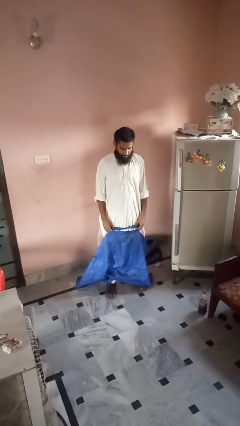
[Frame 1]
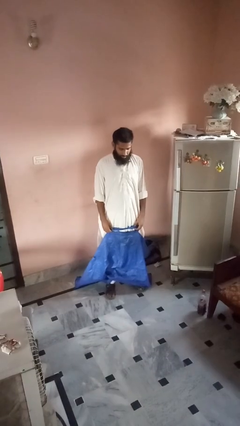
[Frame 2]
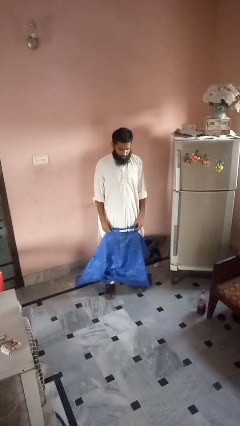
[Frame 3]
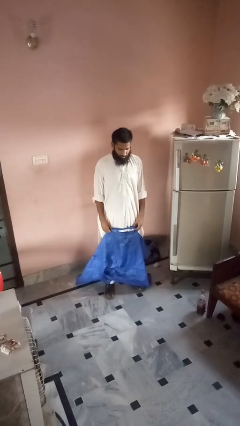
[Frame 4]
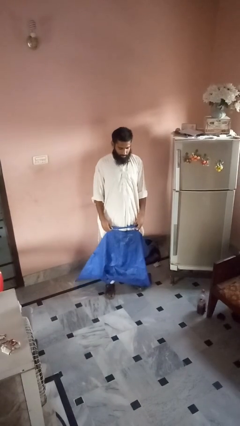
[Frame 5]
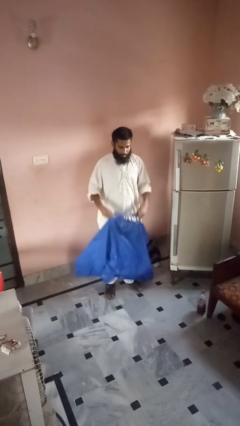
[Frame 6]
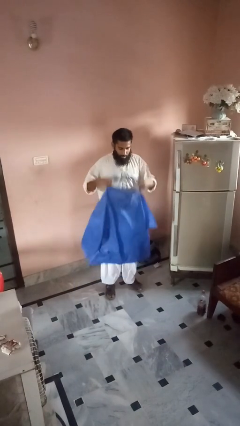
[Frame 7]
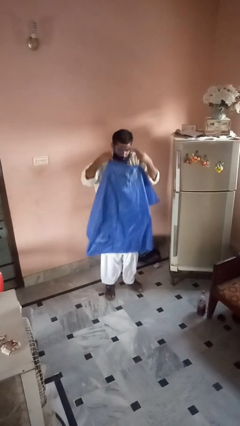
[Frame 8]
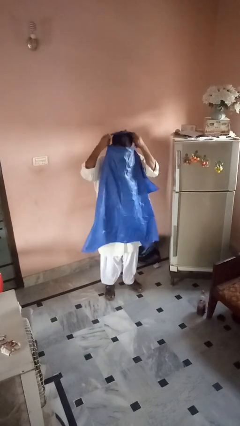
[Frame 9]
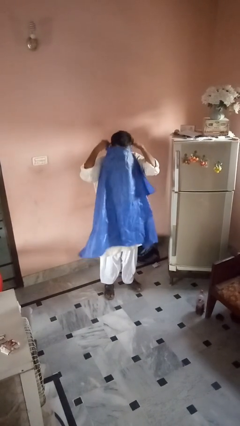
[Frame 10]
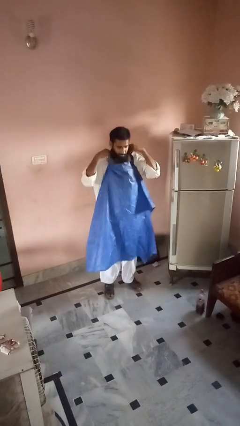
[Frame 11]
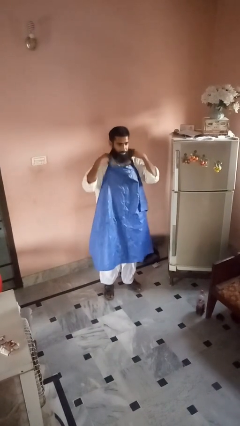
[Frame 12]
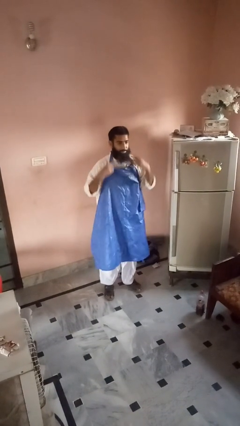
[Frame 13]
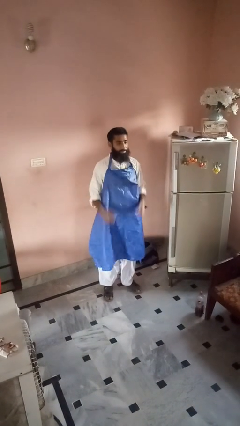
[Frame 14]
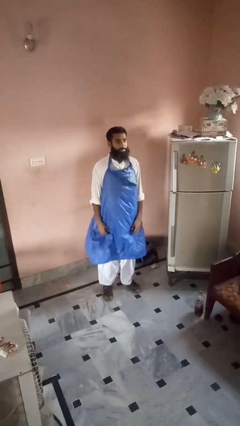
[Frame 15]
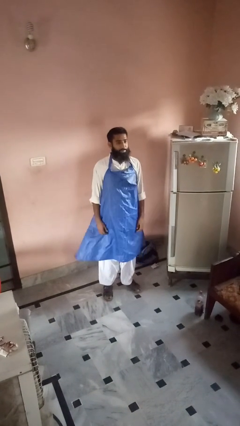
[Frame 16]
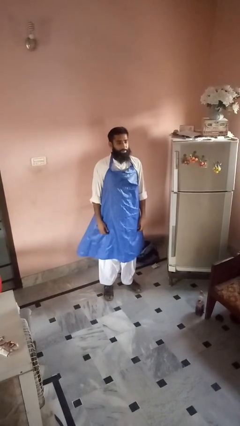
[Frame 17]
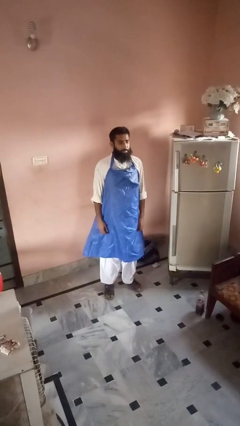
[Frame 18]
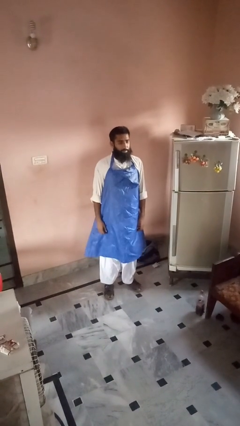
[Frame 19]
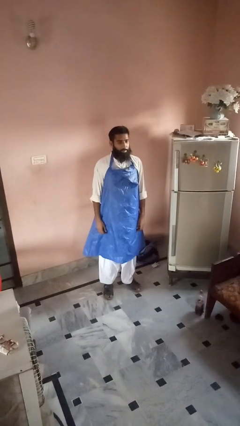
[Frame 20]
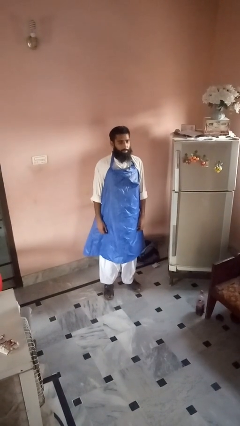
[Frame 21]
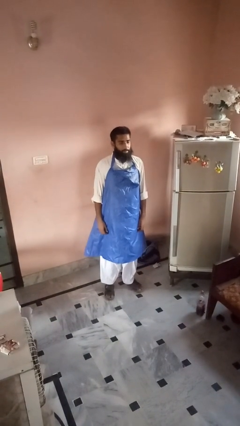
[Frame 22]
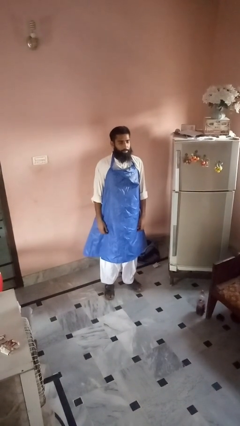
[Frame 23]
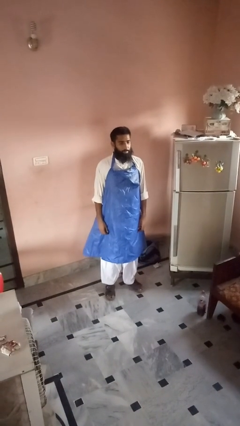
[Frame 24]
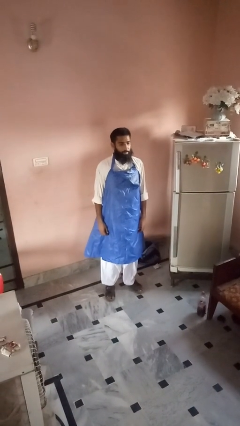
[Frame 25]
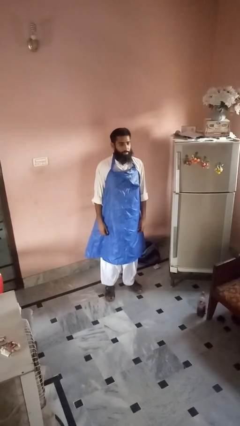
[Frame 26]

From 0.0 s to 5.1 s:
person puts on apron

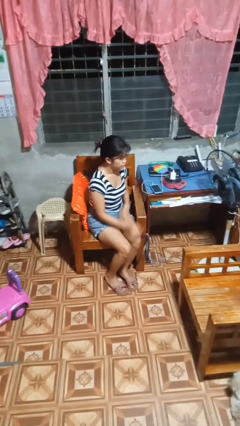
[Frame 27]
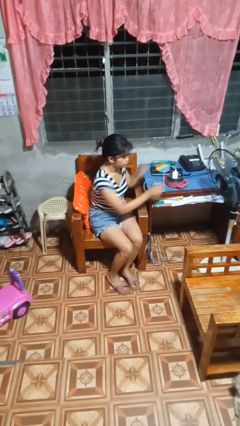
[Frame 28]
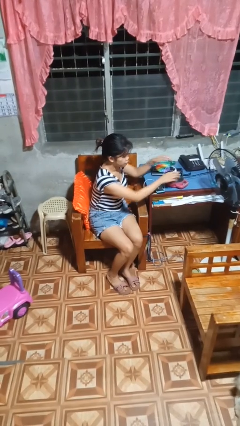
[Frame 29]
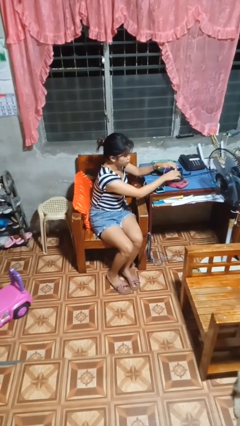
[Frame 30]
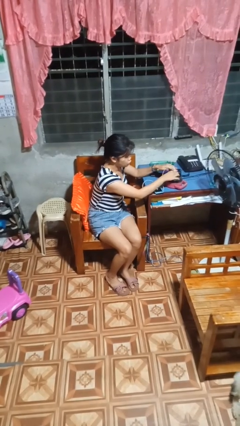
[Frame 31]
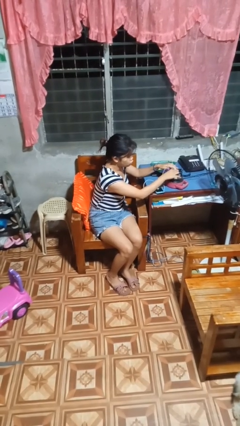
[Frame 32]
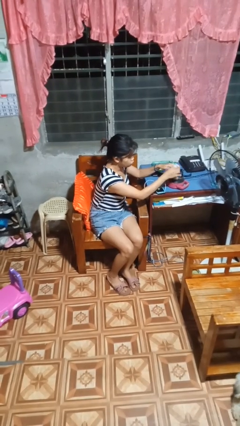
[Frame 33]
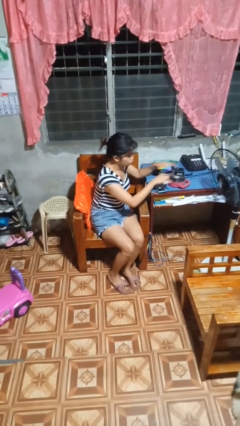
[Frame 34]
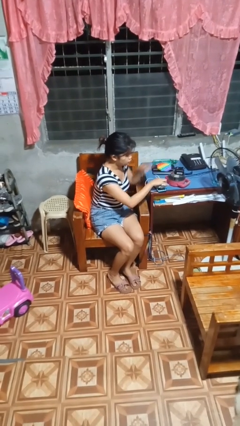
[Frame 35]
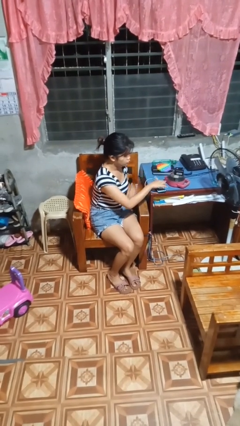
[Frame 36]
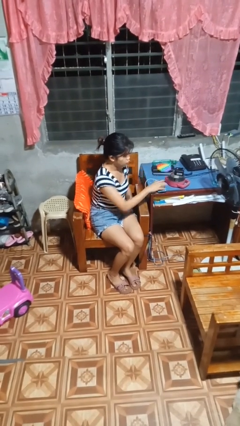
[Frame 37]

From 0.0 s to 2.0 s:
person unplugs from electrical socket

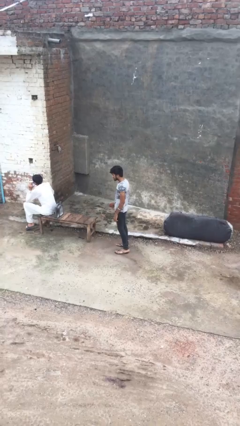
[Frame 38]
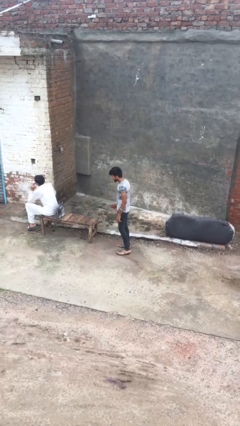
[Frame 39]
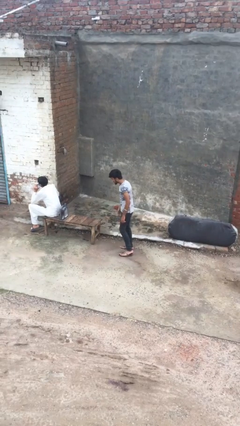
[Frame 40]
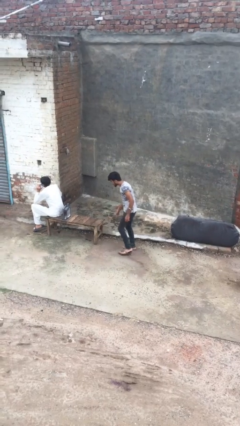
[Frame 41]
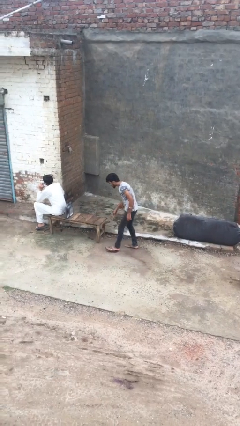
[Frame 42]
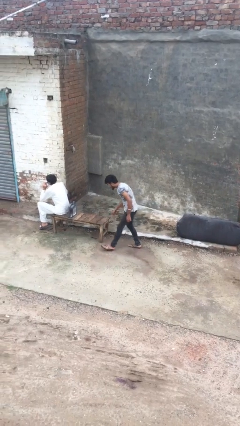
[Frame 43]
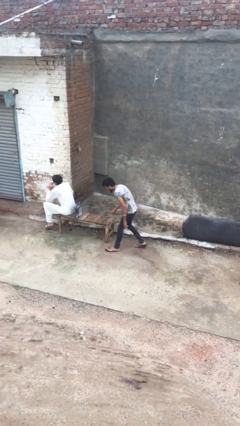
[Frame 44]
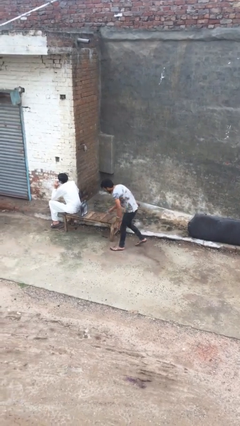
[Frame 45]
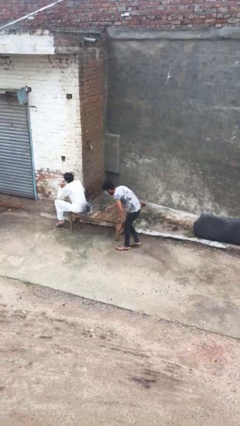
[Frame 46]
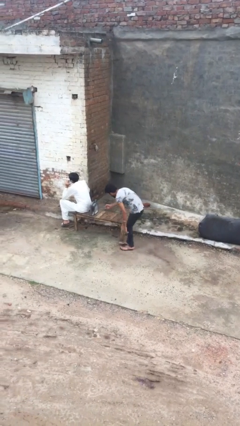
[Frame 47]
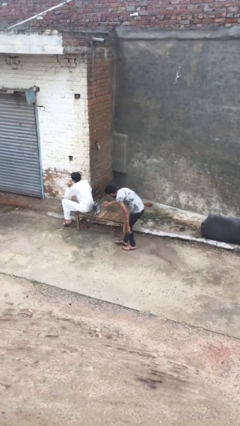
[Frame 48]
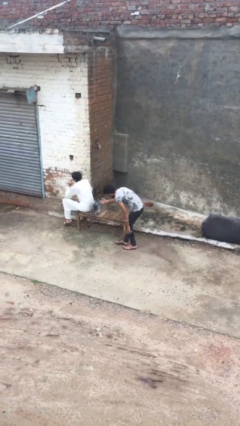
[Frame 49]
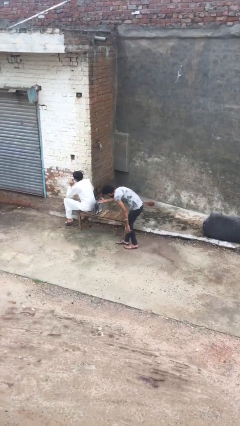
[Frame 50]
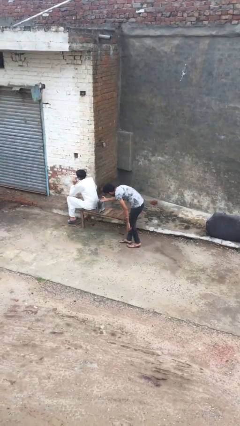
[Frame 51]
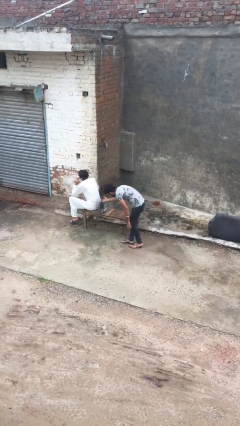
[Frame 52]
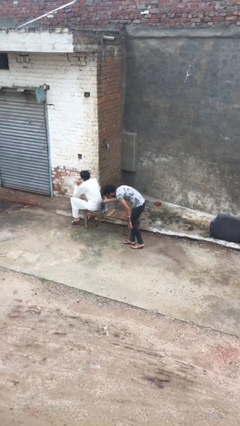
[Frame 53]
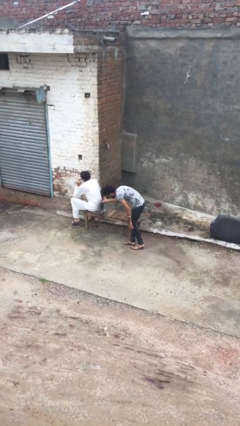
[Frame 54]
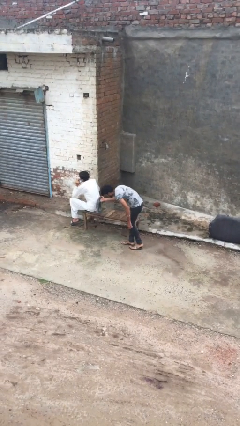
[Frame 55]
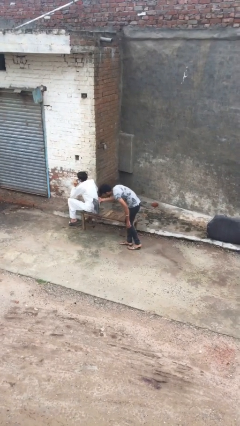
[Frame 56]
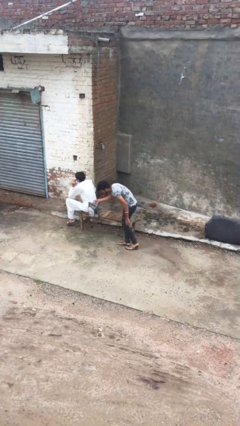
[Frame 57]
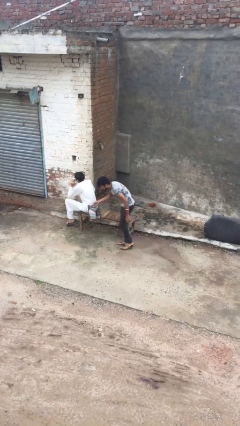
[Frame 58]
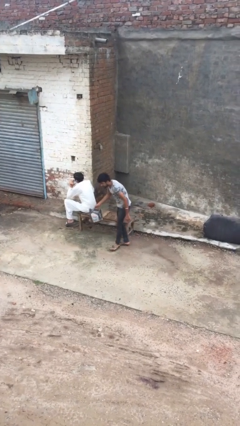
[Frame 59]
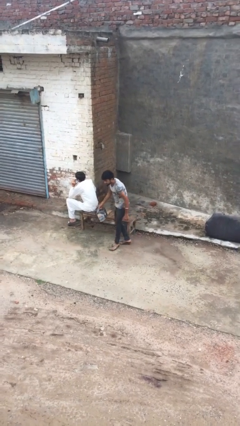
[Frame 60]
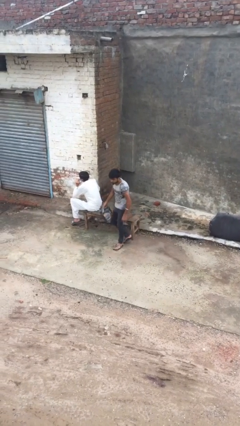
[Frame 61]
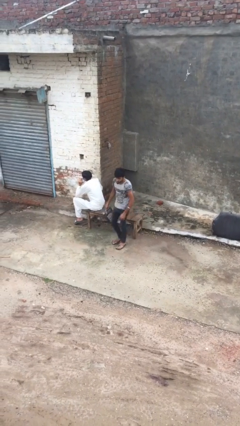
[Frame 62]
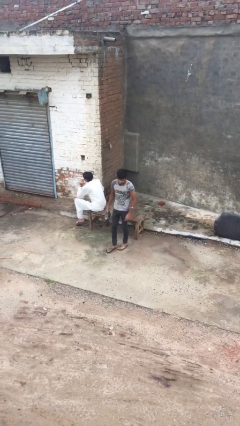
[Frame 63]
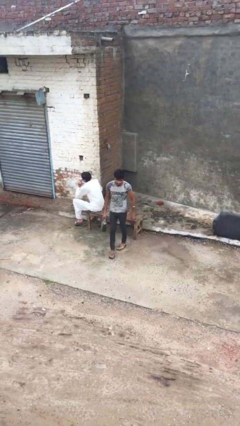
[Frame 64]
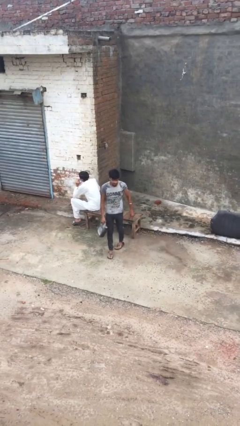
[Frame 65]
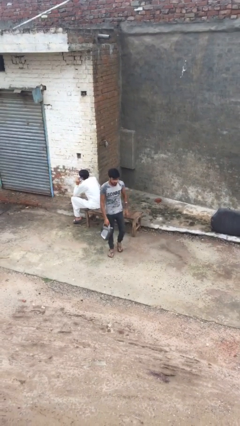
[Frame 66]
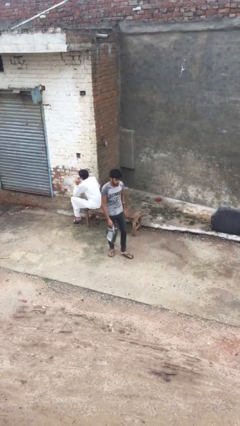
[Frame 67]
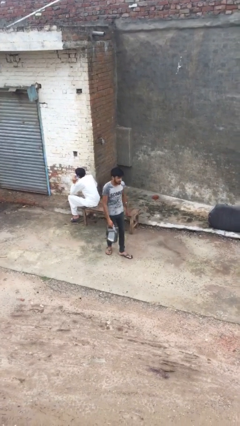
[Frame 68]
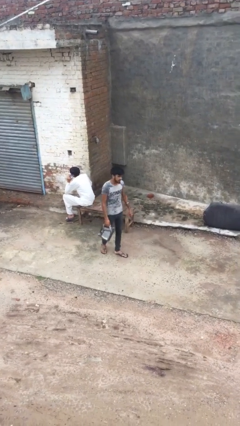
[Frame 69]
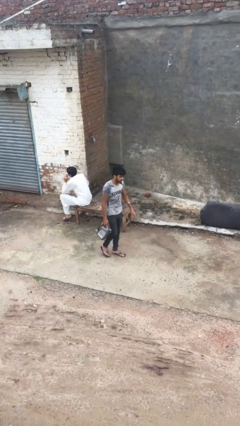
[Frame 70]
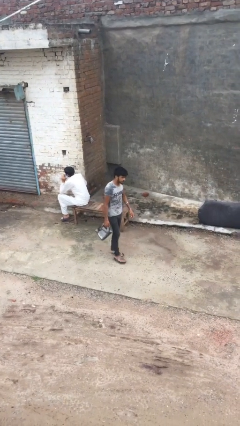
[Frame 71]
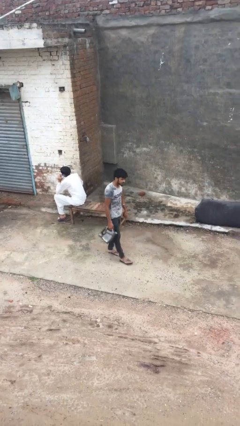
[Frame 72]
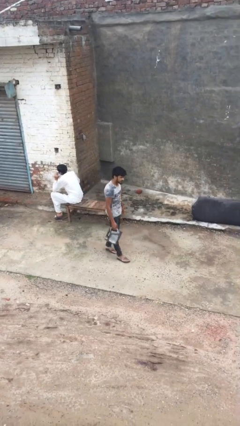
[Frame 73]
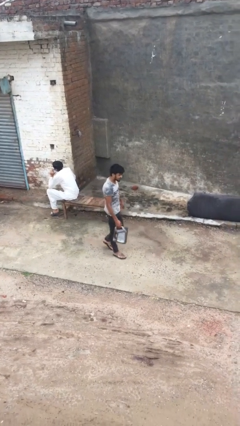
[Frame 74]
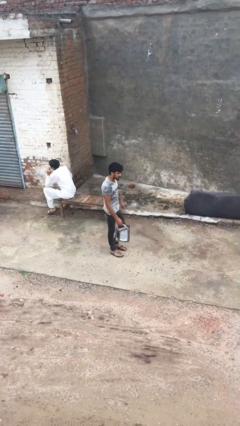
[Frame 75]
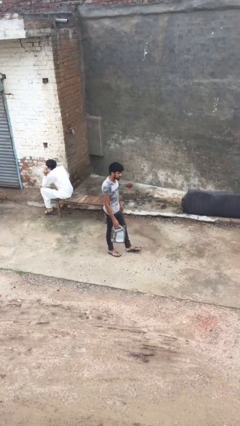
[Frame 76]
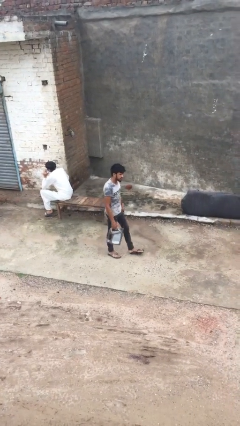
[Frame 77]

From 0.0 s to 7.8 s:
person steals object from person

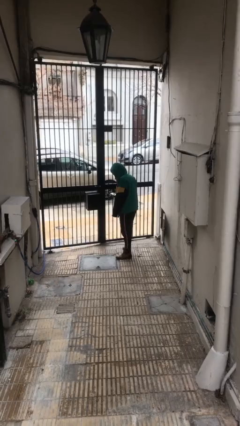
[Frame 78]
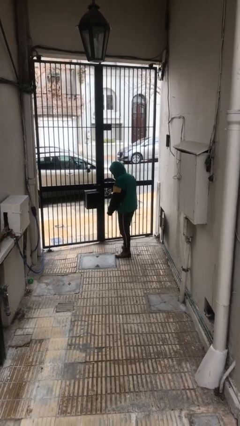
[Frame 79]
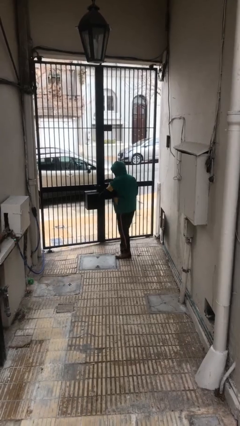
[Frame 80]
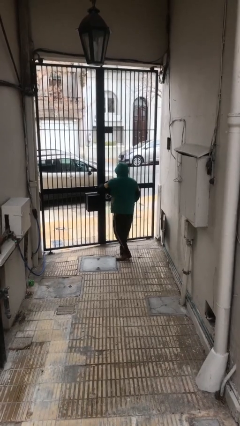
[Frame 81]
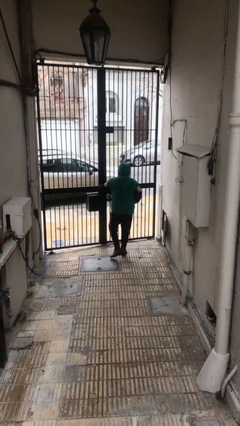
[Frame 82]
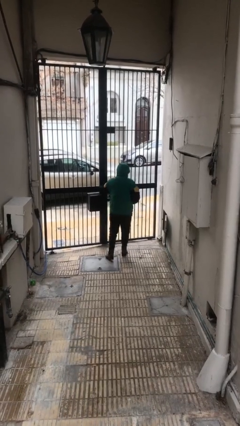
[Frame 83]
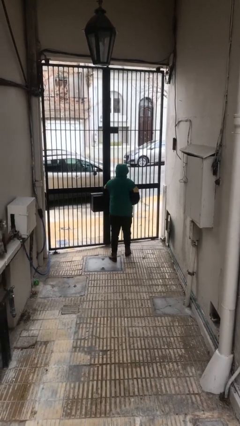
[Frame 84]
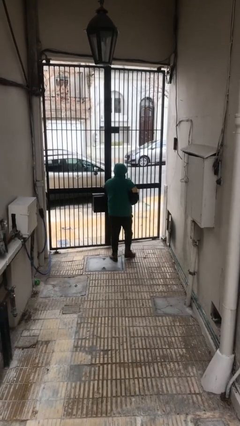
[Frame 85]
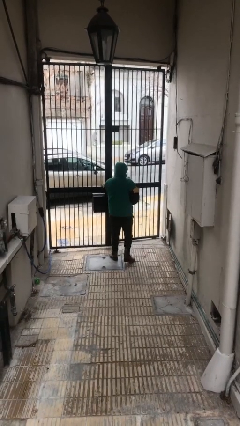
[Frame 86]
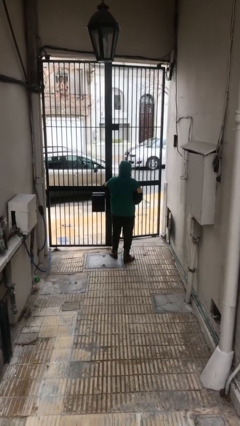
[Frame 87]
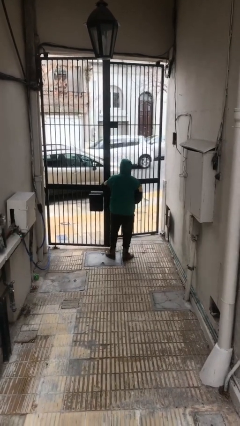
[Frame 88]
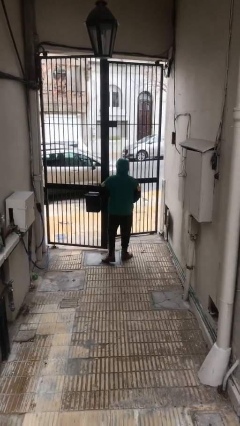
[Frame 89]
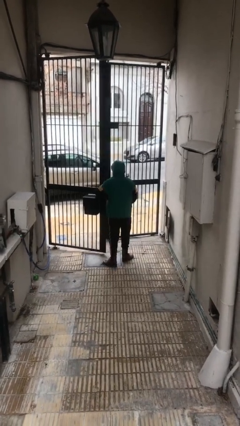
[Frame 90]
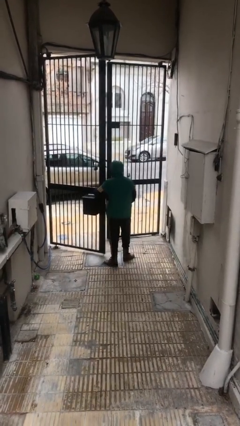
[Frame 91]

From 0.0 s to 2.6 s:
person opens gate
